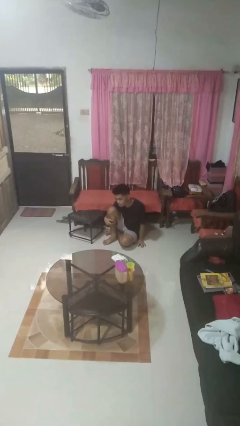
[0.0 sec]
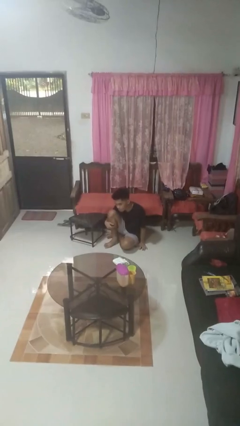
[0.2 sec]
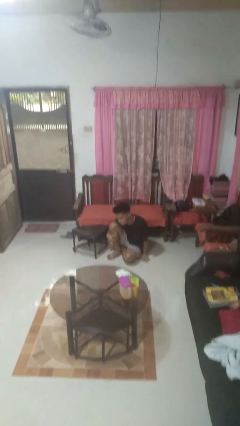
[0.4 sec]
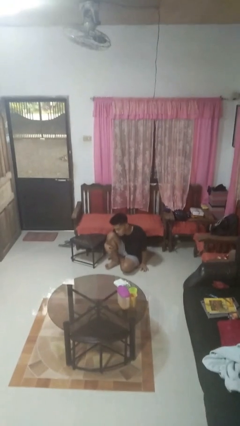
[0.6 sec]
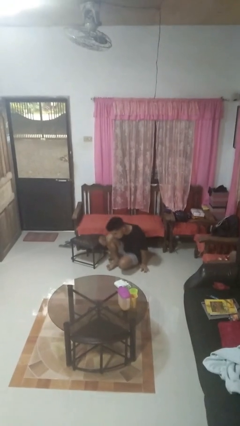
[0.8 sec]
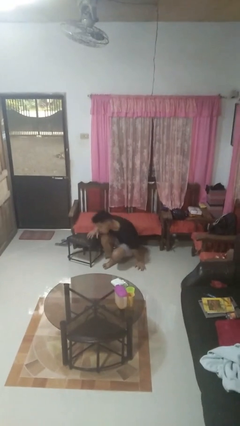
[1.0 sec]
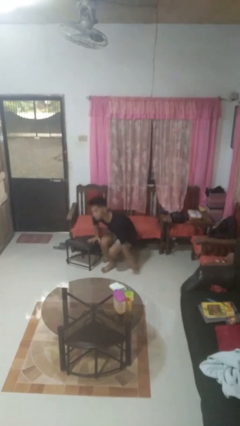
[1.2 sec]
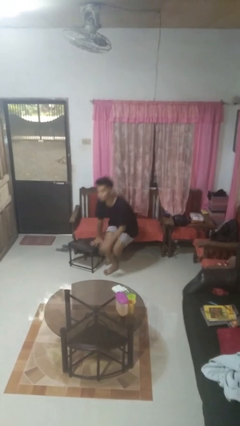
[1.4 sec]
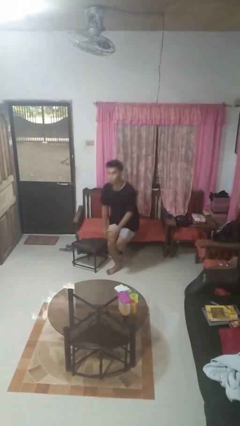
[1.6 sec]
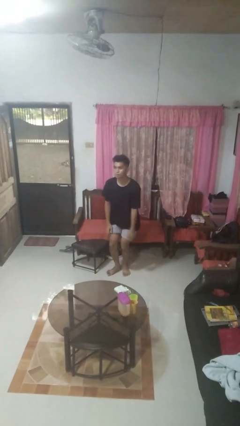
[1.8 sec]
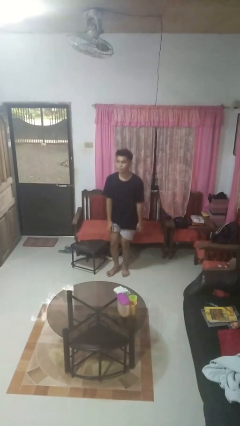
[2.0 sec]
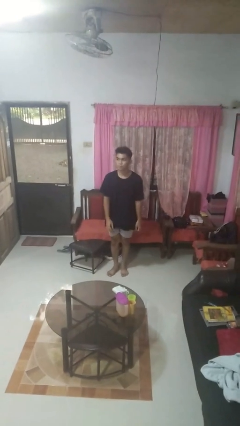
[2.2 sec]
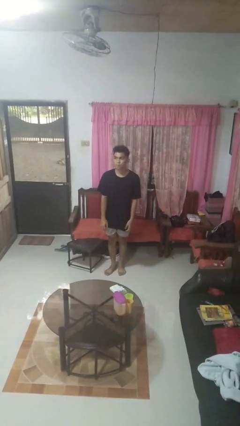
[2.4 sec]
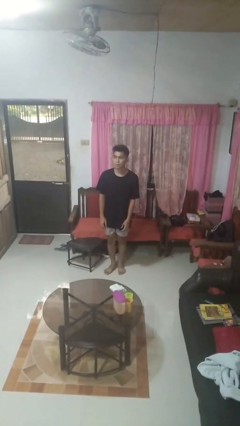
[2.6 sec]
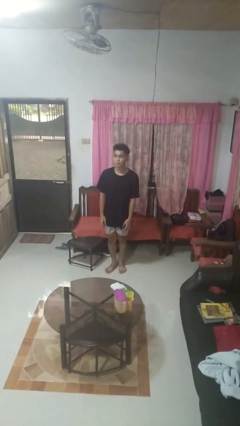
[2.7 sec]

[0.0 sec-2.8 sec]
person stands up from floor

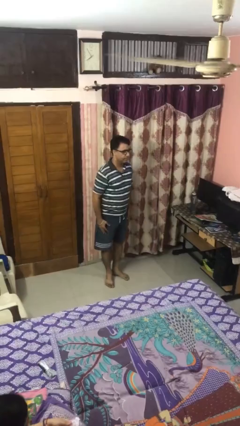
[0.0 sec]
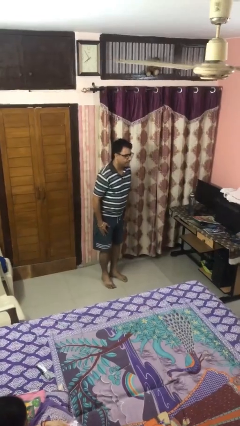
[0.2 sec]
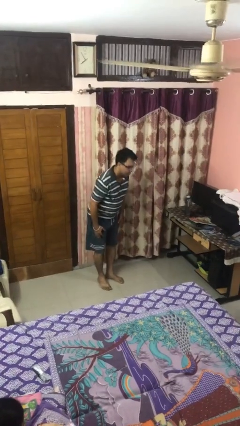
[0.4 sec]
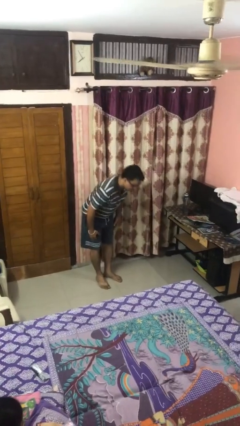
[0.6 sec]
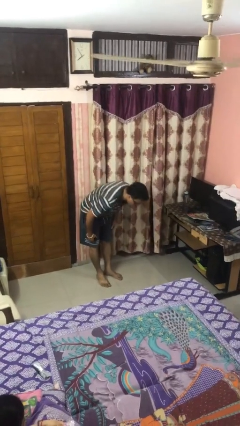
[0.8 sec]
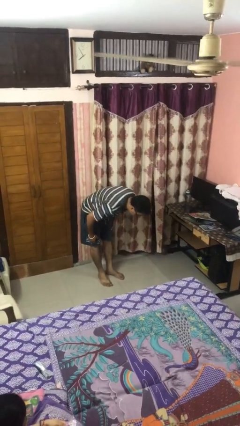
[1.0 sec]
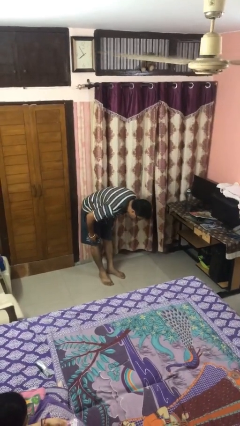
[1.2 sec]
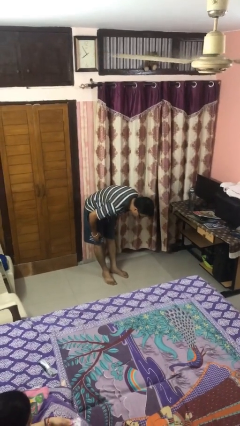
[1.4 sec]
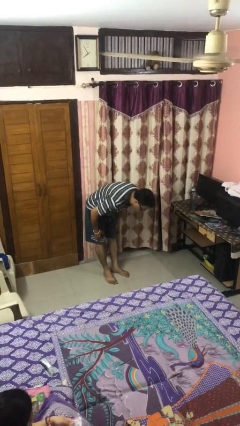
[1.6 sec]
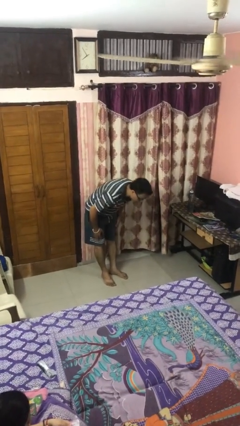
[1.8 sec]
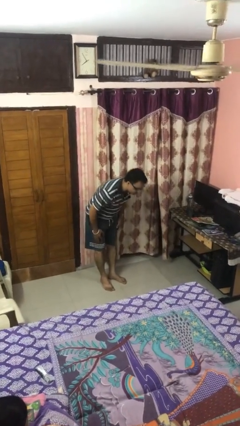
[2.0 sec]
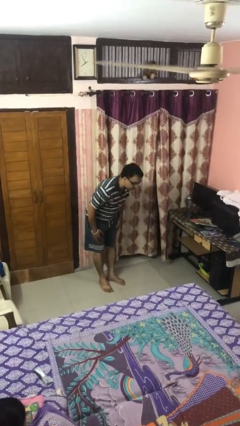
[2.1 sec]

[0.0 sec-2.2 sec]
person bows

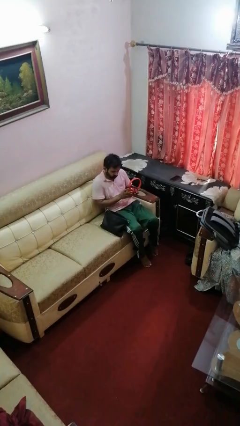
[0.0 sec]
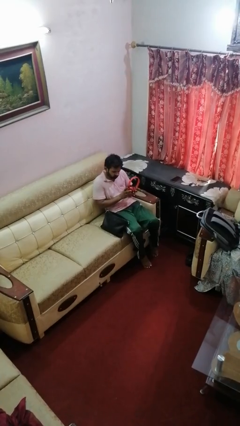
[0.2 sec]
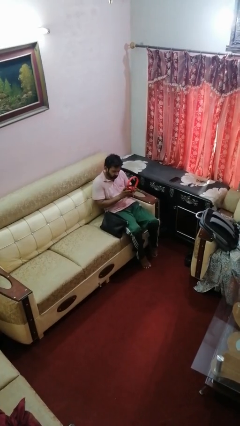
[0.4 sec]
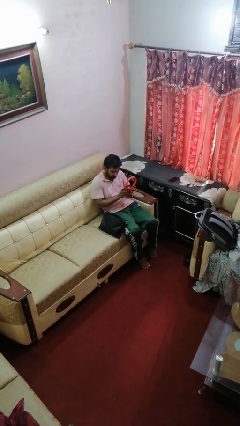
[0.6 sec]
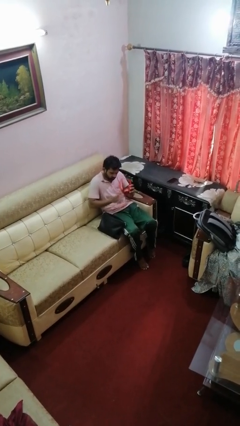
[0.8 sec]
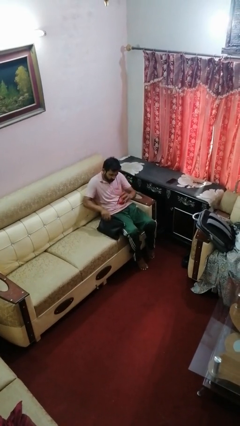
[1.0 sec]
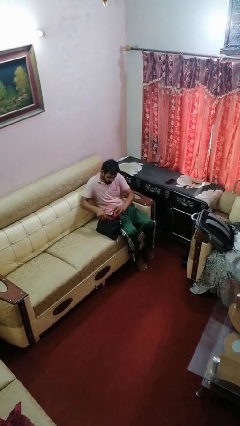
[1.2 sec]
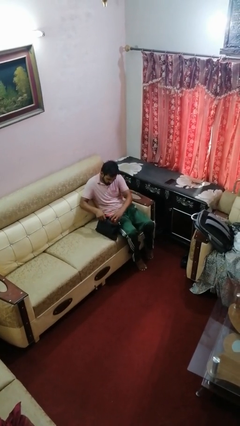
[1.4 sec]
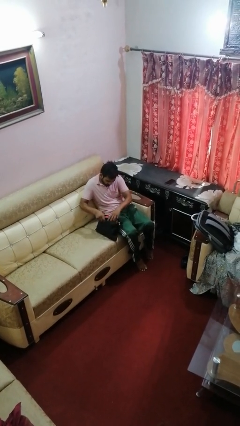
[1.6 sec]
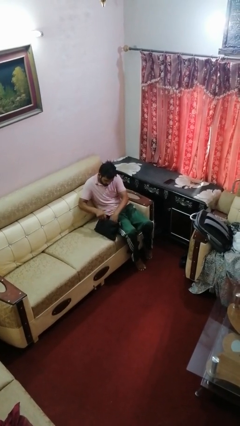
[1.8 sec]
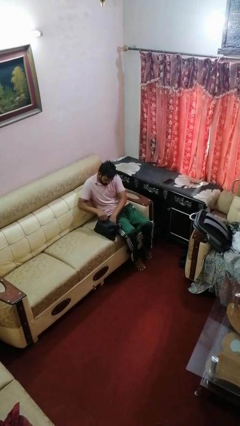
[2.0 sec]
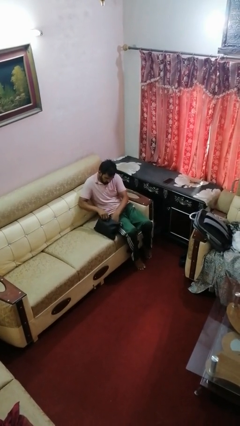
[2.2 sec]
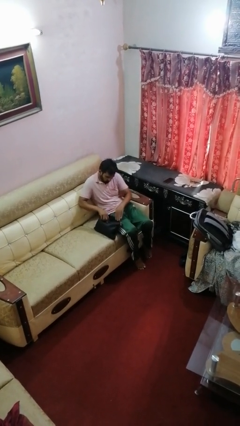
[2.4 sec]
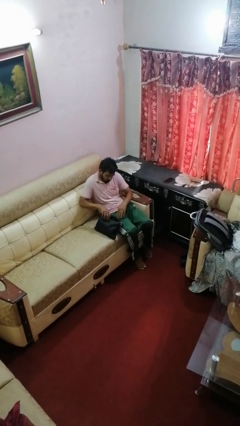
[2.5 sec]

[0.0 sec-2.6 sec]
person puts object into purse

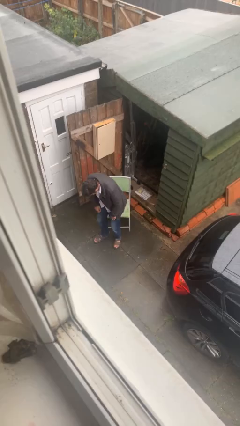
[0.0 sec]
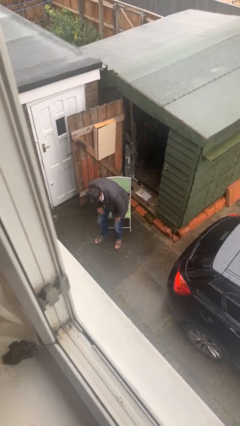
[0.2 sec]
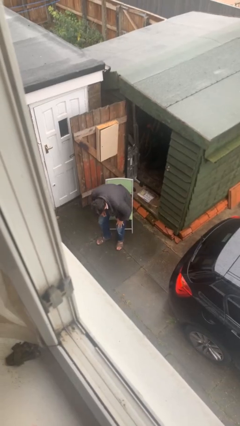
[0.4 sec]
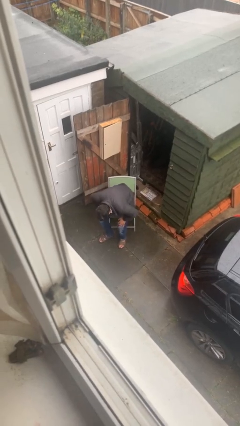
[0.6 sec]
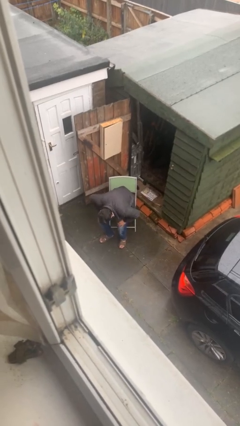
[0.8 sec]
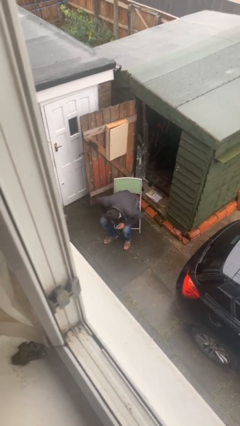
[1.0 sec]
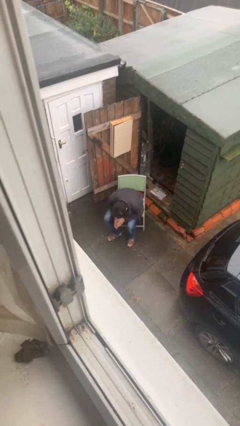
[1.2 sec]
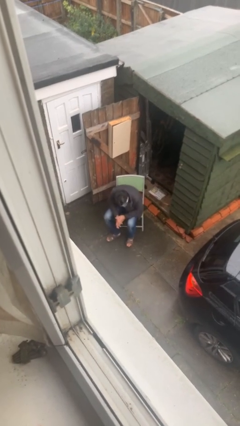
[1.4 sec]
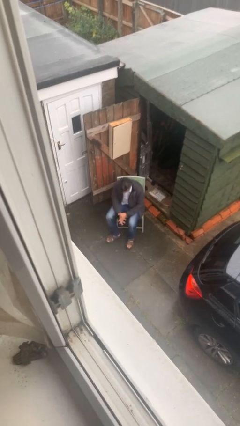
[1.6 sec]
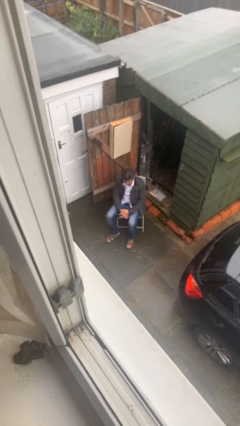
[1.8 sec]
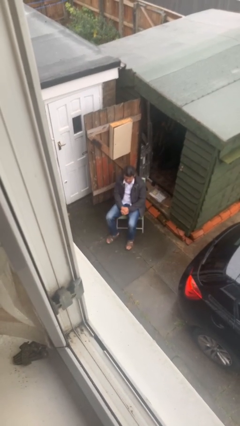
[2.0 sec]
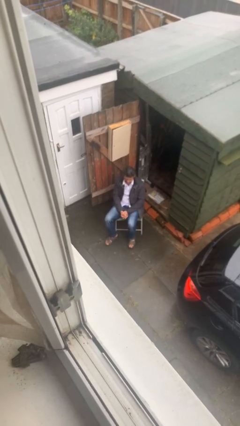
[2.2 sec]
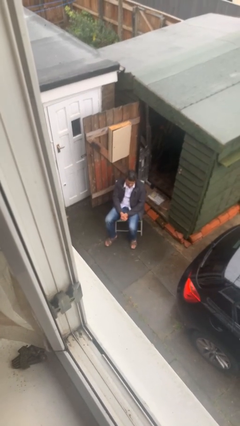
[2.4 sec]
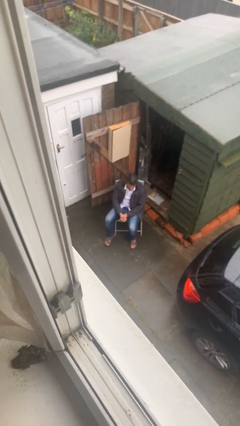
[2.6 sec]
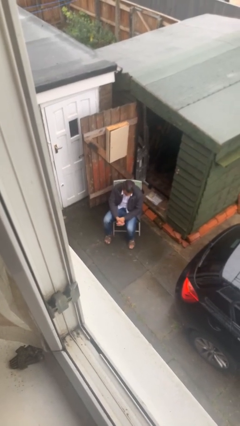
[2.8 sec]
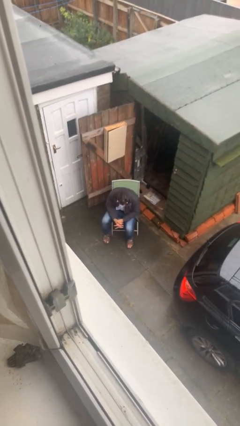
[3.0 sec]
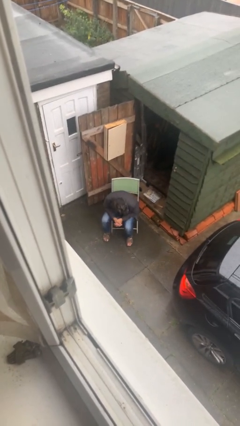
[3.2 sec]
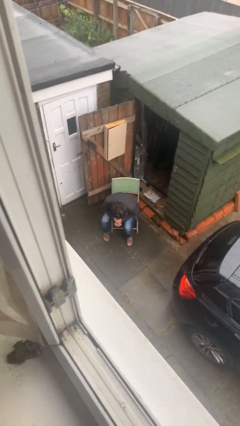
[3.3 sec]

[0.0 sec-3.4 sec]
person sits down

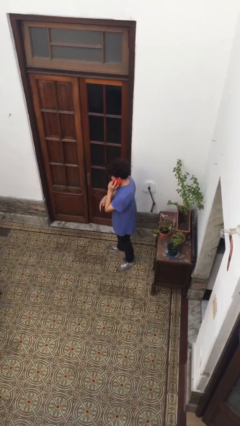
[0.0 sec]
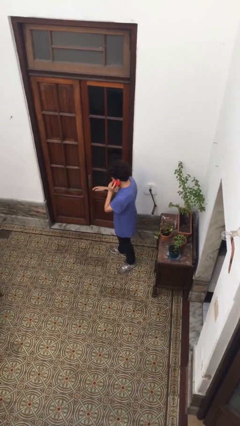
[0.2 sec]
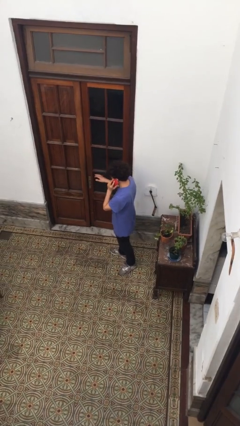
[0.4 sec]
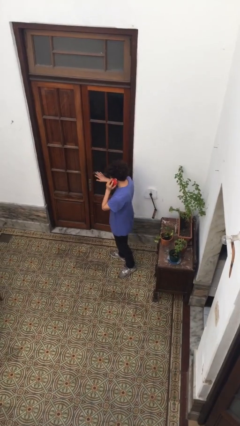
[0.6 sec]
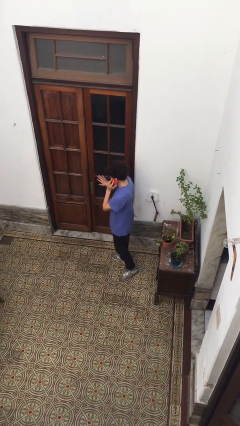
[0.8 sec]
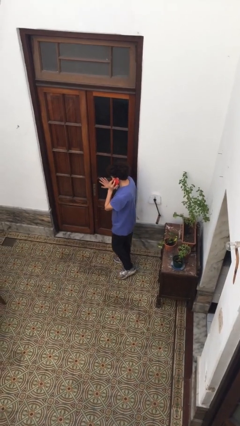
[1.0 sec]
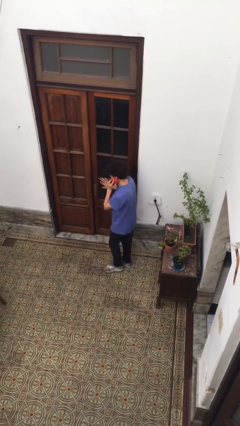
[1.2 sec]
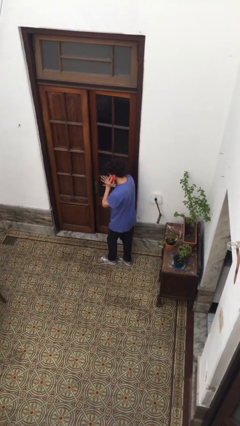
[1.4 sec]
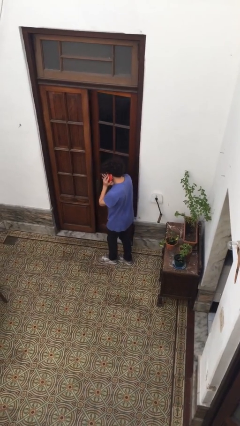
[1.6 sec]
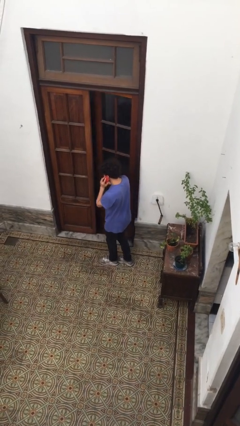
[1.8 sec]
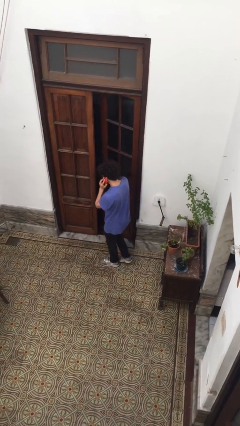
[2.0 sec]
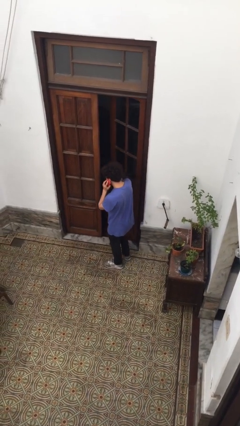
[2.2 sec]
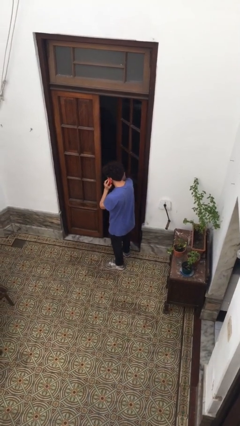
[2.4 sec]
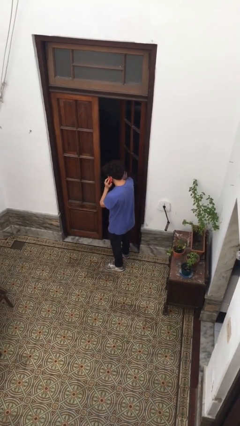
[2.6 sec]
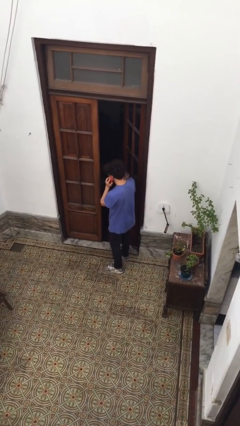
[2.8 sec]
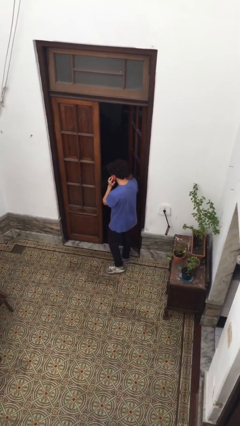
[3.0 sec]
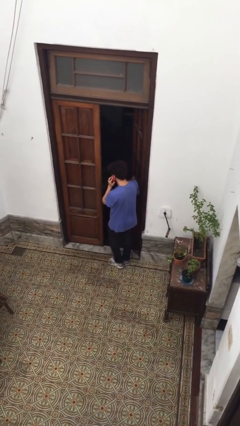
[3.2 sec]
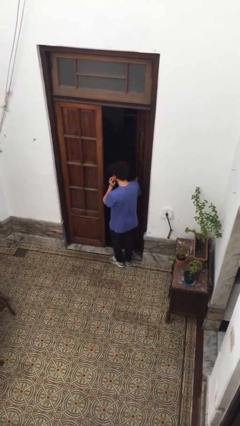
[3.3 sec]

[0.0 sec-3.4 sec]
person opens facility door

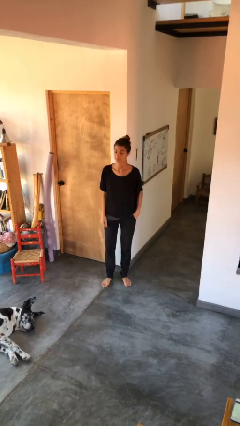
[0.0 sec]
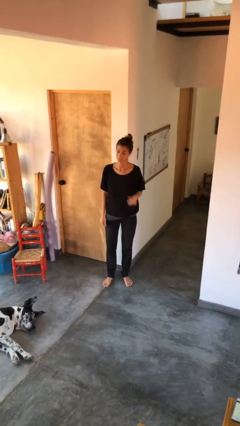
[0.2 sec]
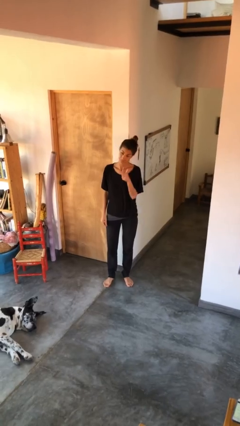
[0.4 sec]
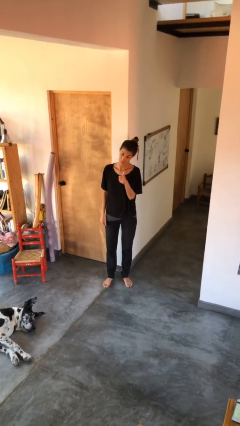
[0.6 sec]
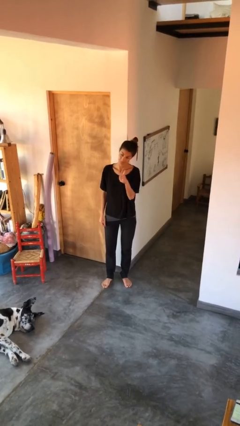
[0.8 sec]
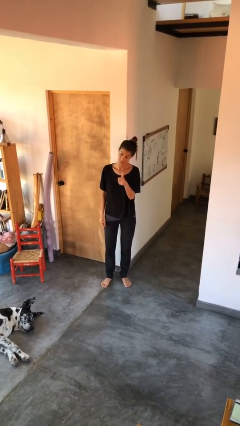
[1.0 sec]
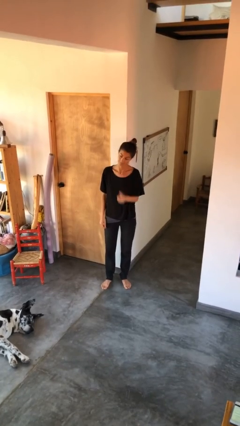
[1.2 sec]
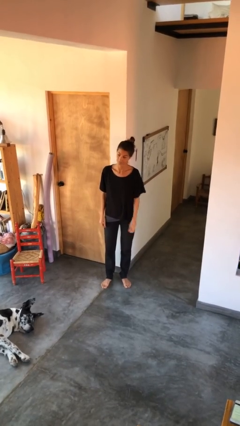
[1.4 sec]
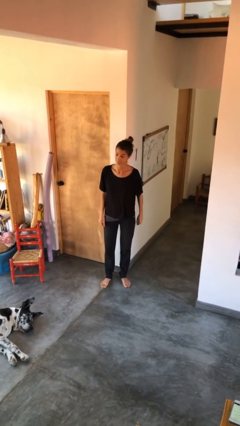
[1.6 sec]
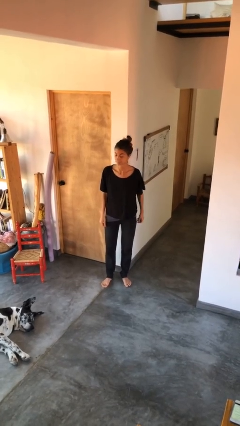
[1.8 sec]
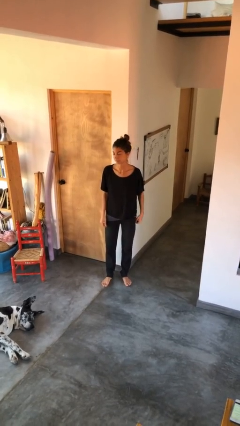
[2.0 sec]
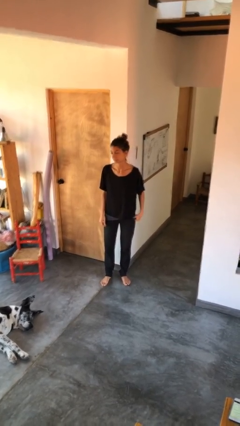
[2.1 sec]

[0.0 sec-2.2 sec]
person gestures thumbs up

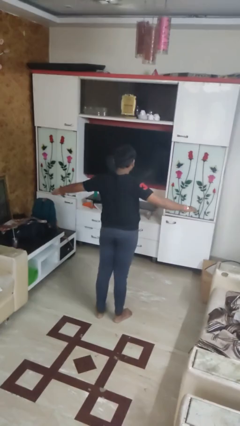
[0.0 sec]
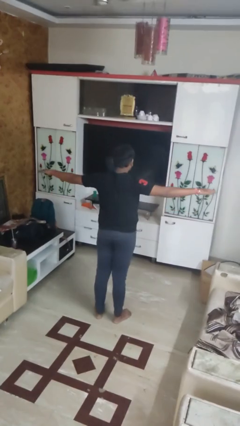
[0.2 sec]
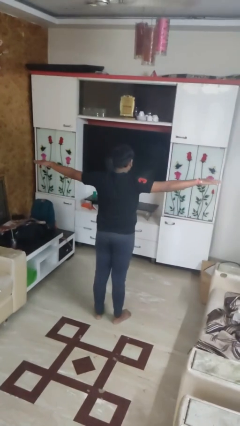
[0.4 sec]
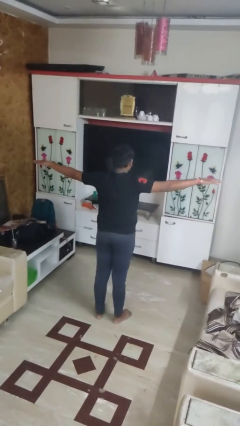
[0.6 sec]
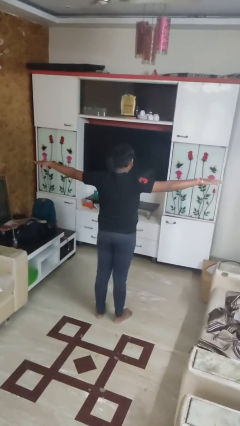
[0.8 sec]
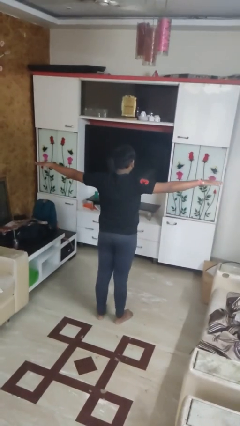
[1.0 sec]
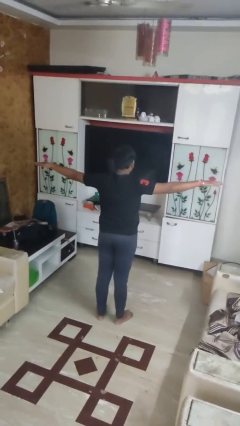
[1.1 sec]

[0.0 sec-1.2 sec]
person stretches arms to side
